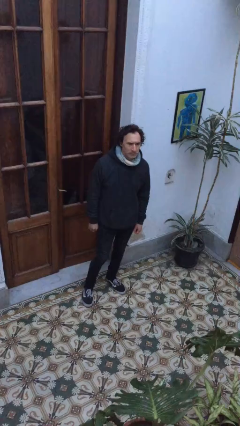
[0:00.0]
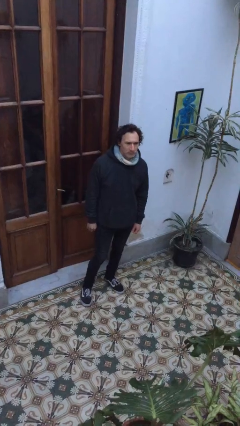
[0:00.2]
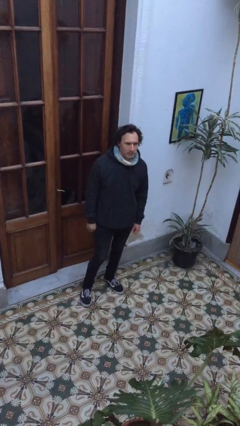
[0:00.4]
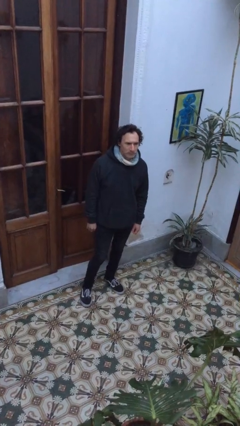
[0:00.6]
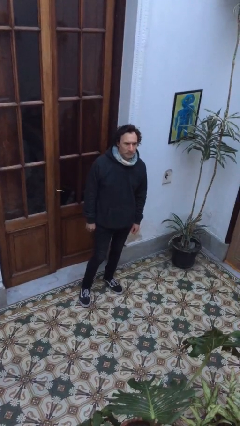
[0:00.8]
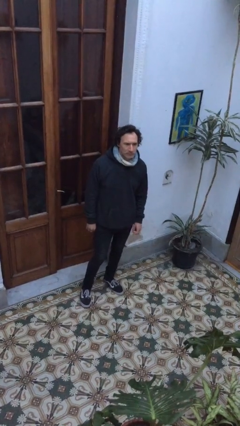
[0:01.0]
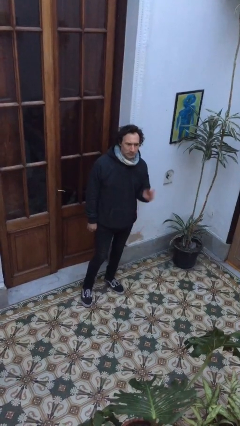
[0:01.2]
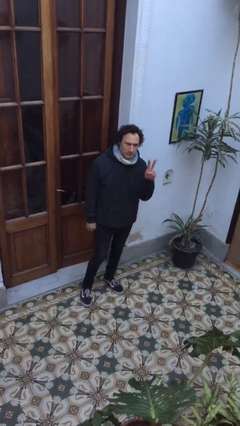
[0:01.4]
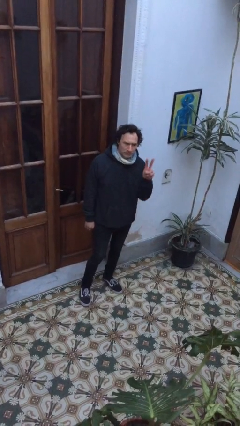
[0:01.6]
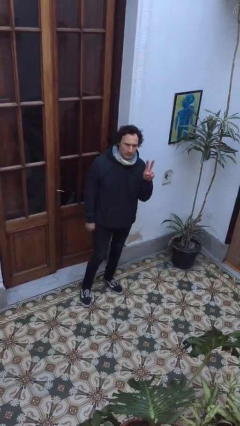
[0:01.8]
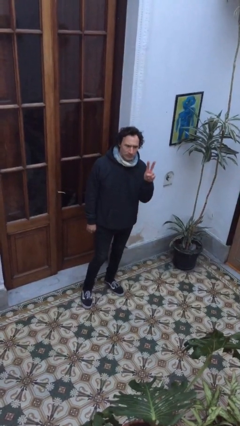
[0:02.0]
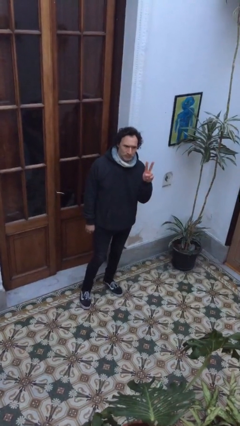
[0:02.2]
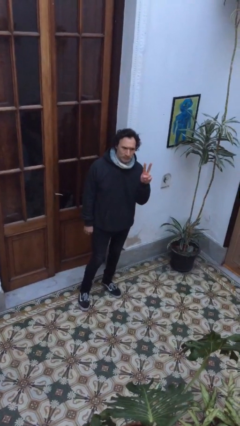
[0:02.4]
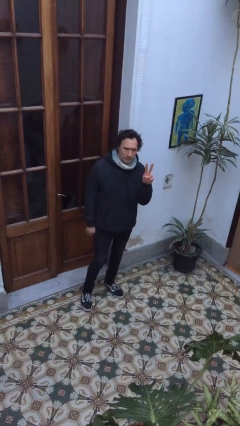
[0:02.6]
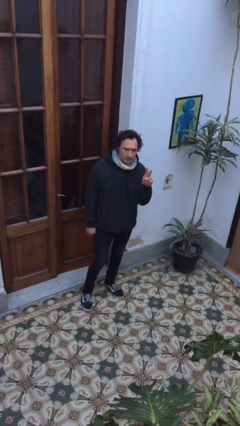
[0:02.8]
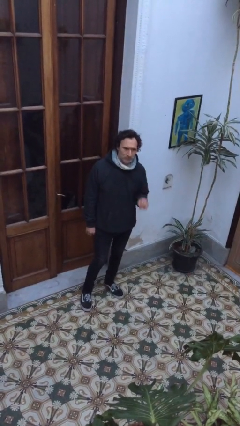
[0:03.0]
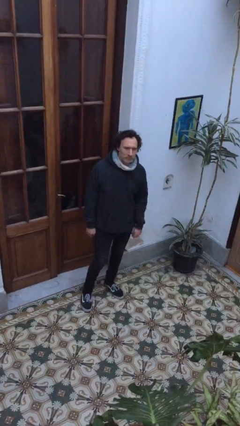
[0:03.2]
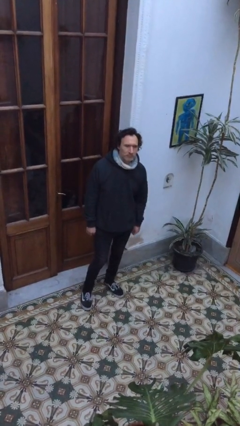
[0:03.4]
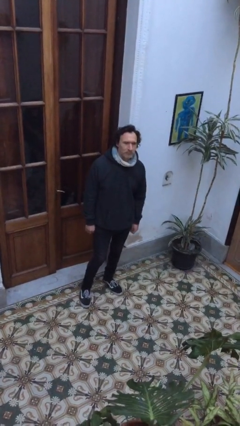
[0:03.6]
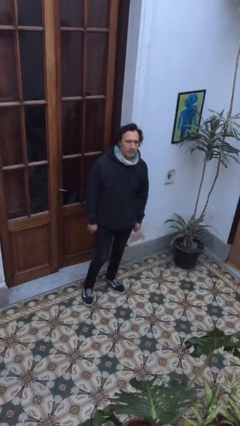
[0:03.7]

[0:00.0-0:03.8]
person gestures peace

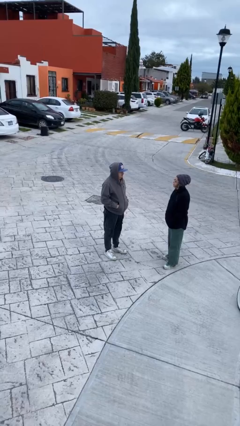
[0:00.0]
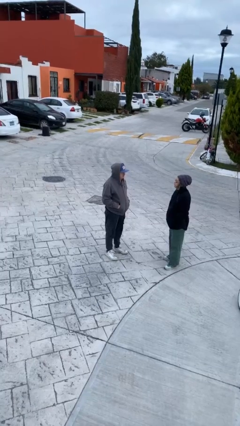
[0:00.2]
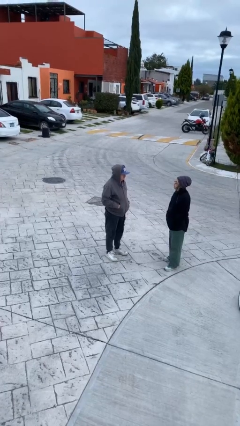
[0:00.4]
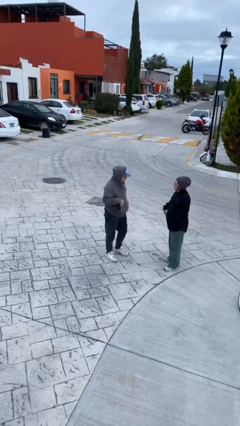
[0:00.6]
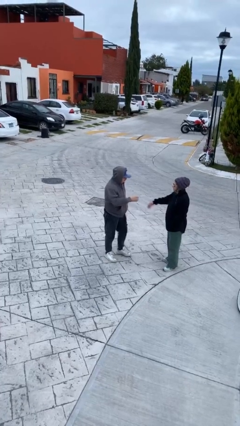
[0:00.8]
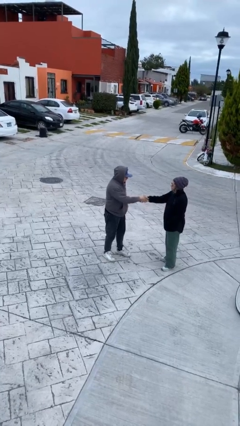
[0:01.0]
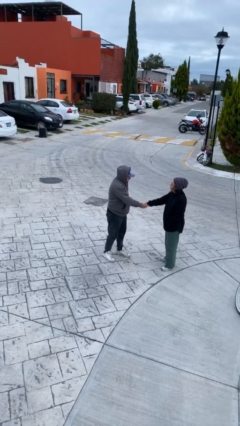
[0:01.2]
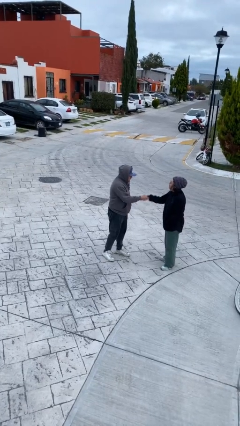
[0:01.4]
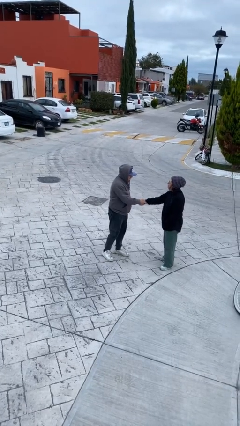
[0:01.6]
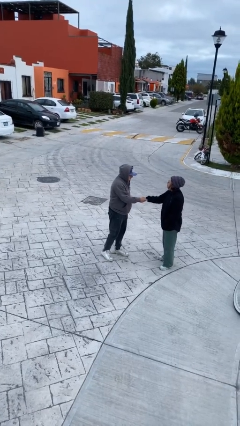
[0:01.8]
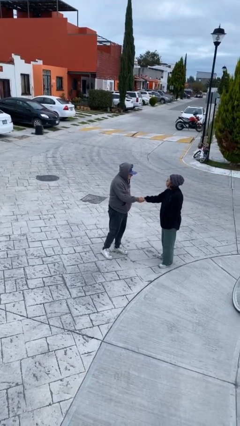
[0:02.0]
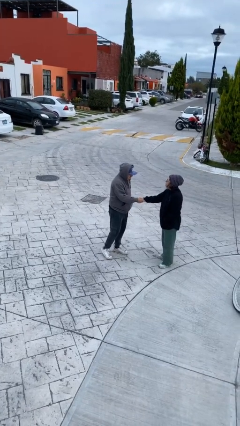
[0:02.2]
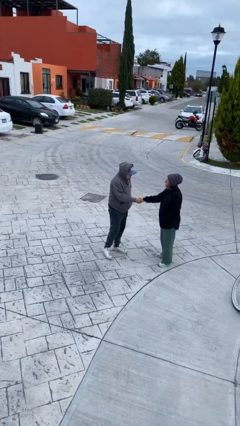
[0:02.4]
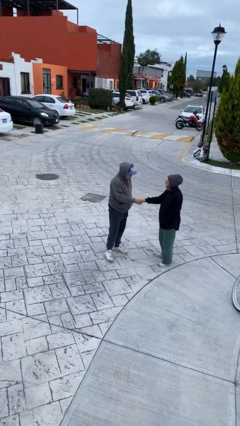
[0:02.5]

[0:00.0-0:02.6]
person shakes hand

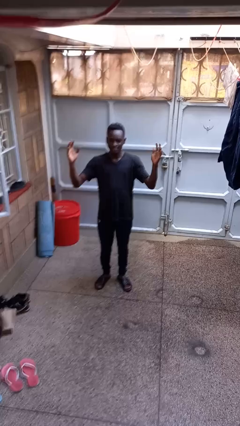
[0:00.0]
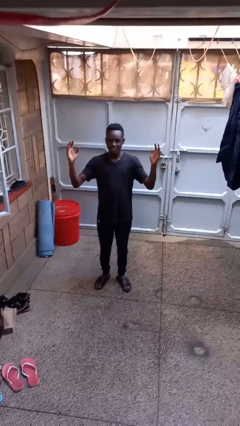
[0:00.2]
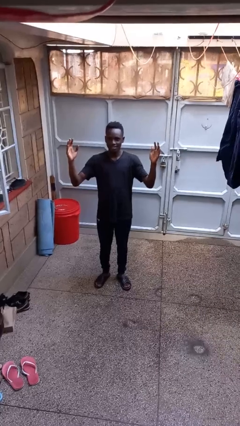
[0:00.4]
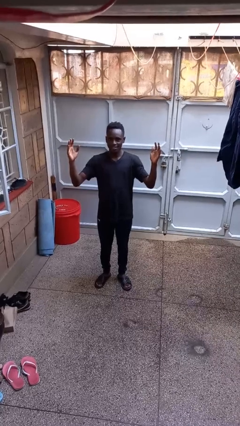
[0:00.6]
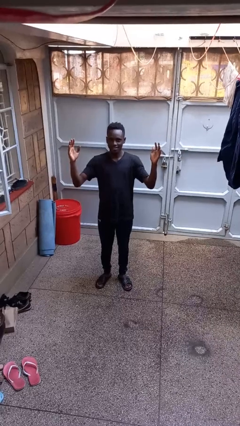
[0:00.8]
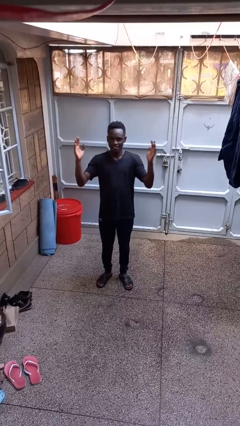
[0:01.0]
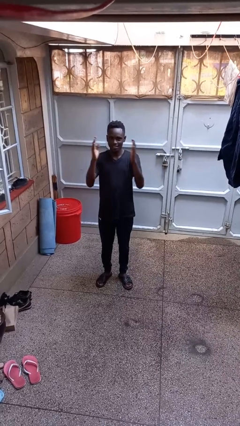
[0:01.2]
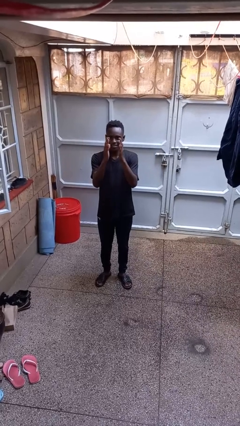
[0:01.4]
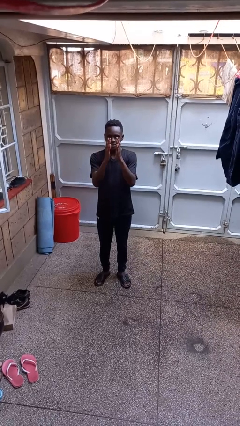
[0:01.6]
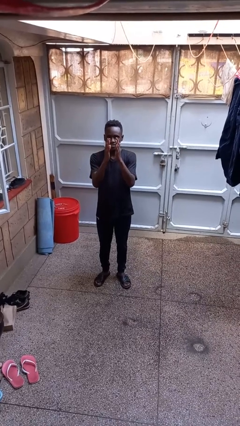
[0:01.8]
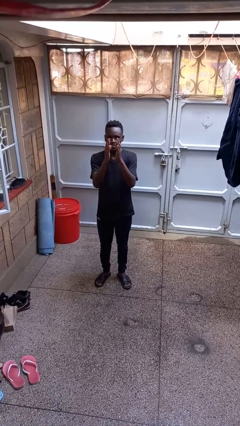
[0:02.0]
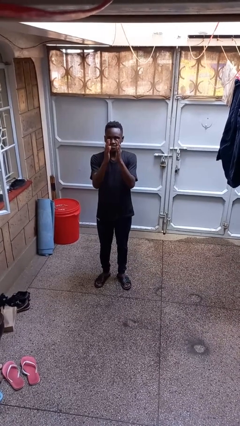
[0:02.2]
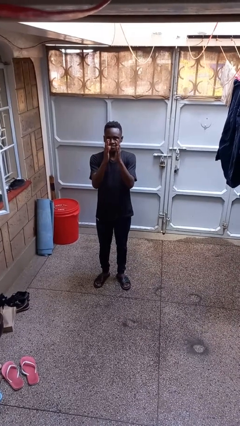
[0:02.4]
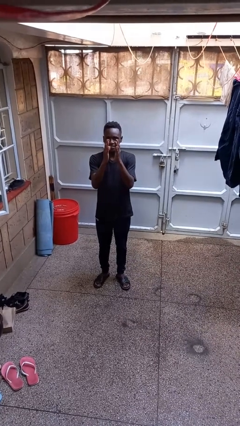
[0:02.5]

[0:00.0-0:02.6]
person gestures zoom in

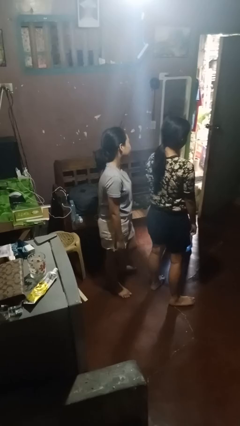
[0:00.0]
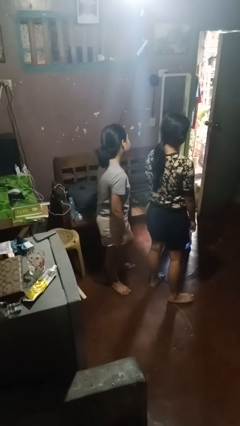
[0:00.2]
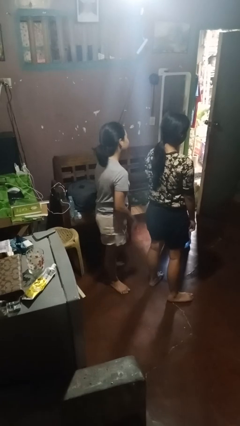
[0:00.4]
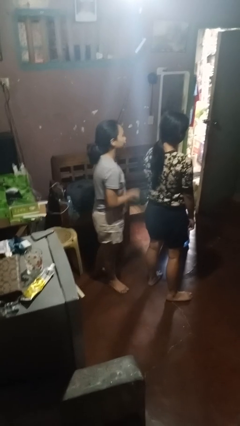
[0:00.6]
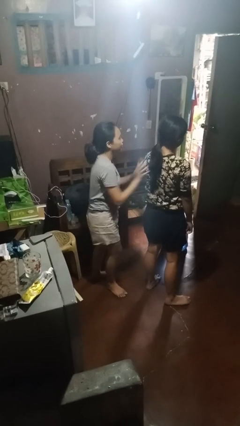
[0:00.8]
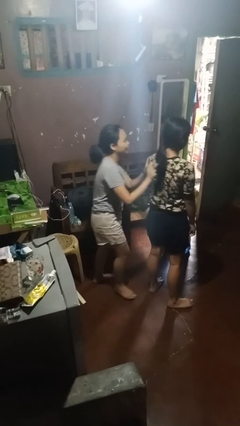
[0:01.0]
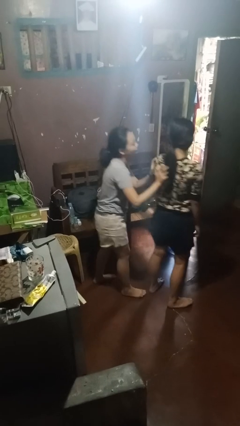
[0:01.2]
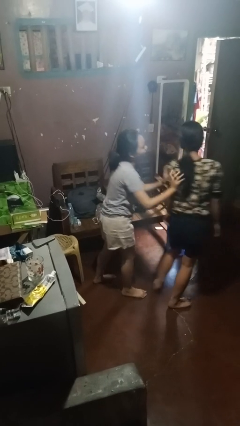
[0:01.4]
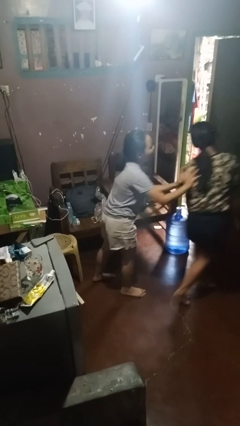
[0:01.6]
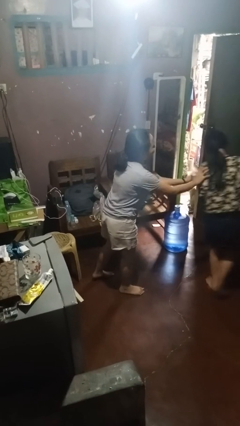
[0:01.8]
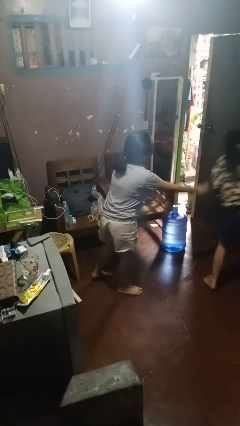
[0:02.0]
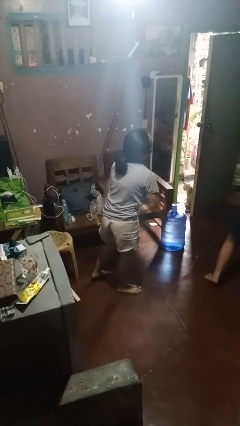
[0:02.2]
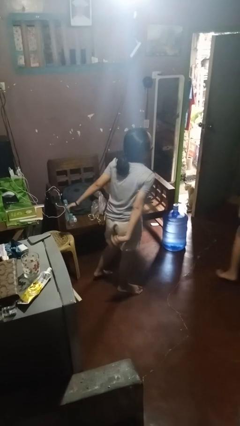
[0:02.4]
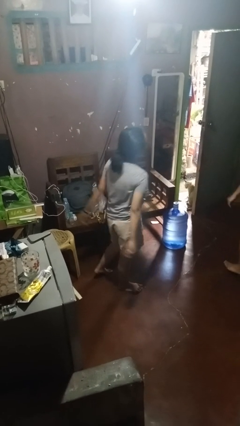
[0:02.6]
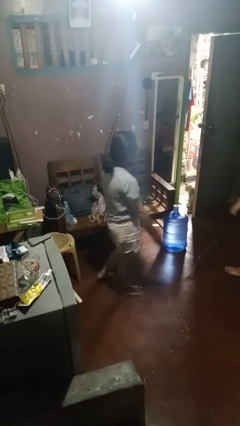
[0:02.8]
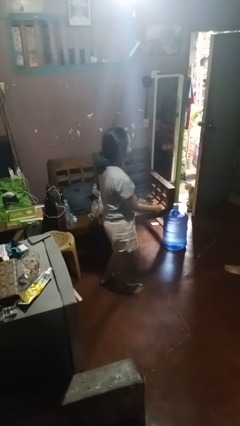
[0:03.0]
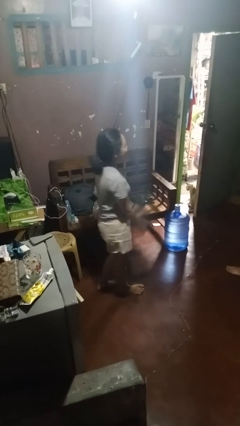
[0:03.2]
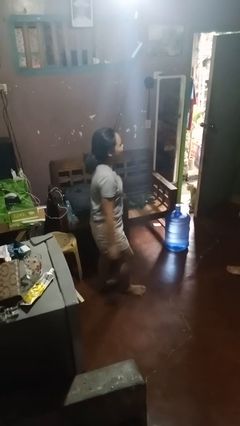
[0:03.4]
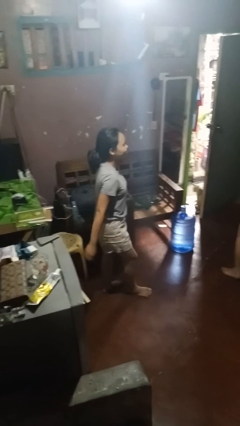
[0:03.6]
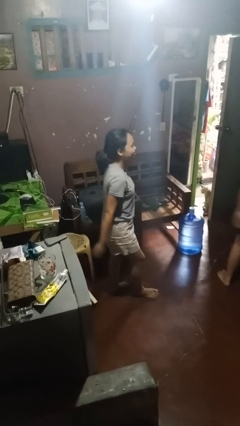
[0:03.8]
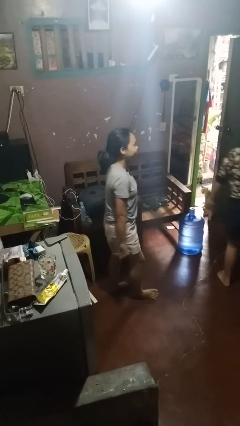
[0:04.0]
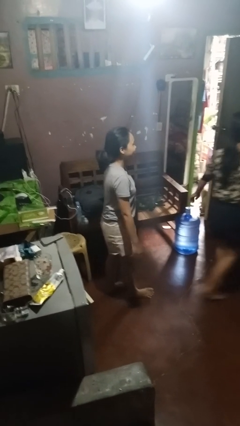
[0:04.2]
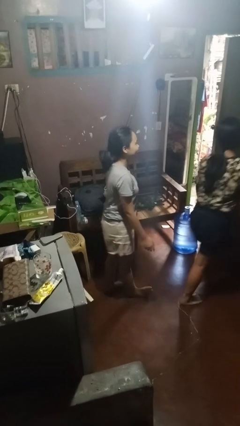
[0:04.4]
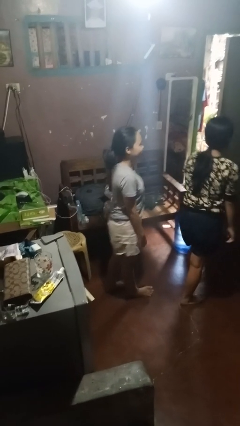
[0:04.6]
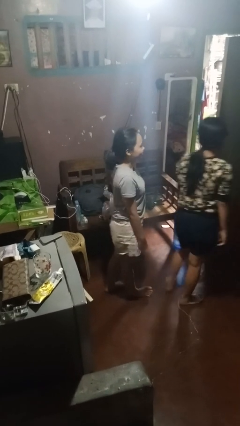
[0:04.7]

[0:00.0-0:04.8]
person shoves person

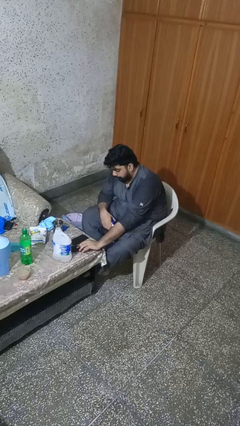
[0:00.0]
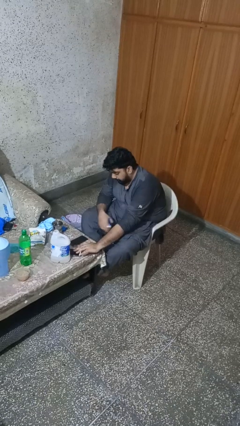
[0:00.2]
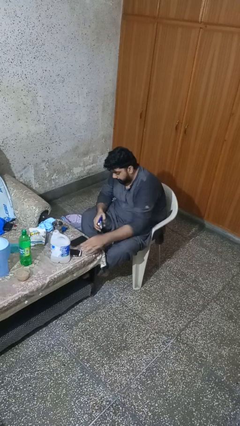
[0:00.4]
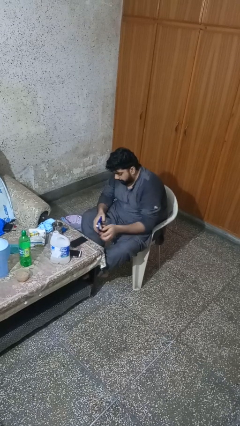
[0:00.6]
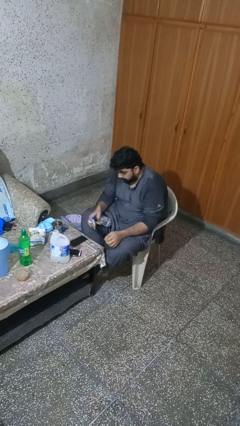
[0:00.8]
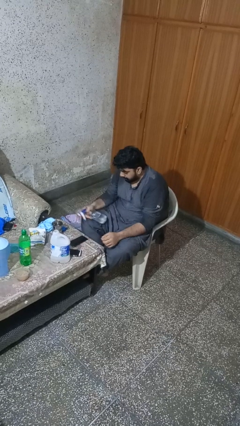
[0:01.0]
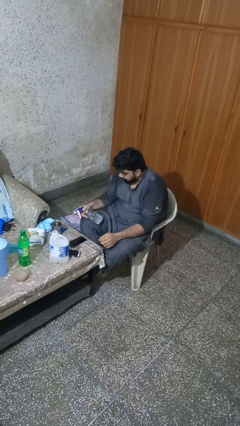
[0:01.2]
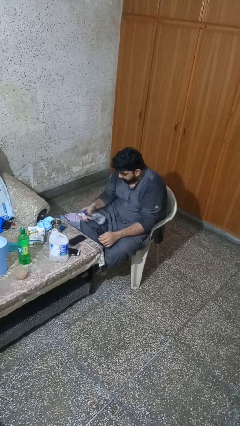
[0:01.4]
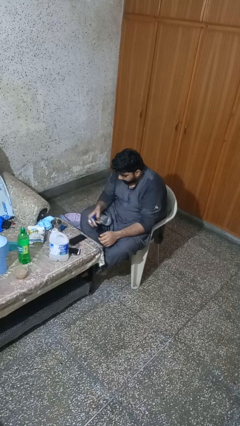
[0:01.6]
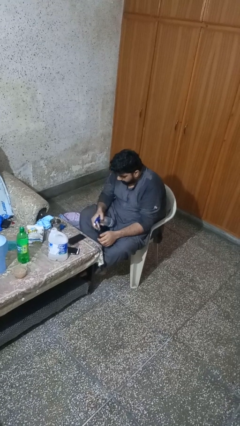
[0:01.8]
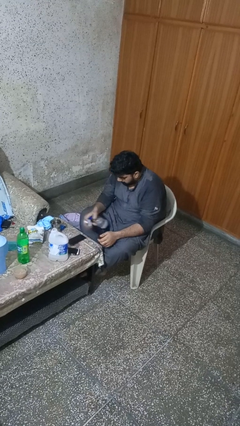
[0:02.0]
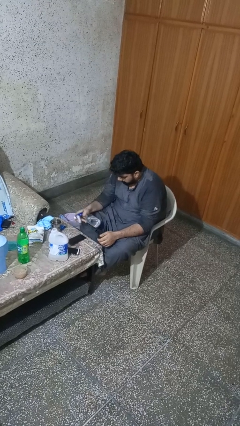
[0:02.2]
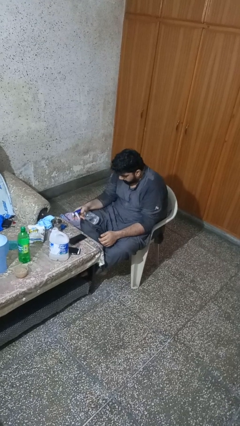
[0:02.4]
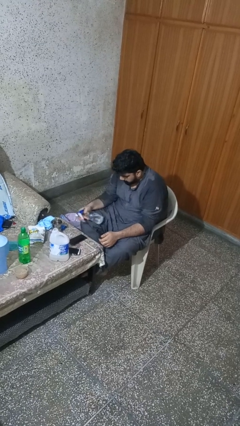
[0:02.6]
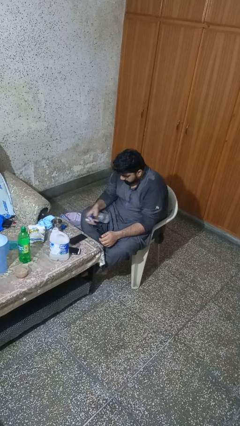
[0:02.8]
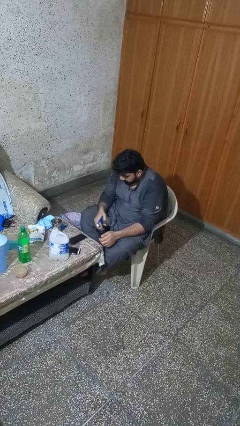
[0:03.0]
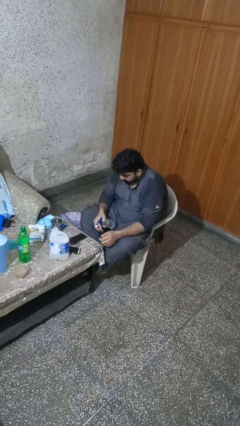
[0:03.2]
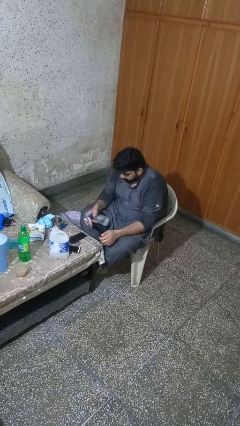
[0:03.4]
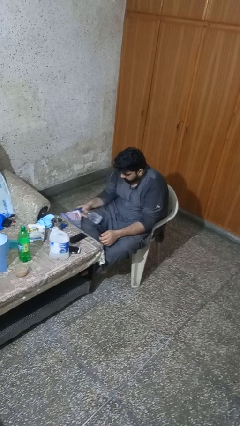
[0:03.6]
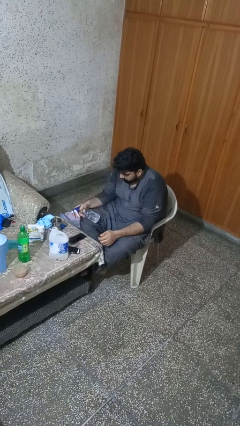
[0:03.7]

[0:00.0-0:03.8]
person sprays from bottle
